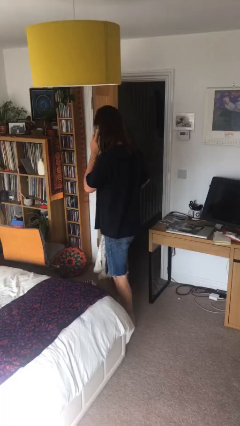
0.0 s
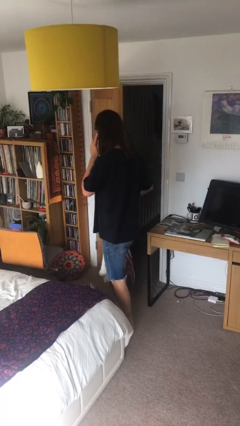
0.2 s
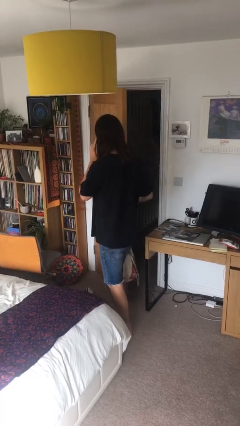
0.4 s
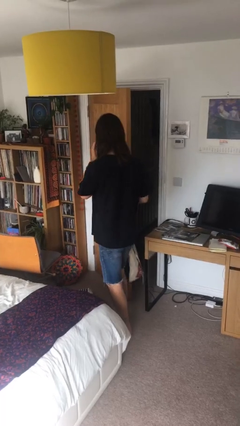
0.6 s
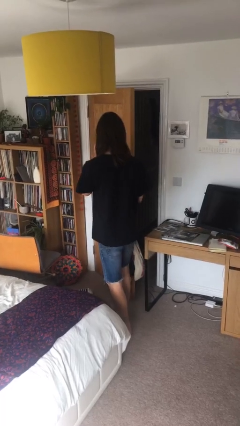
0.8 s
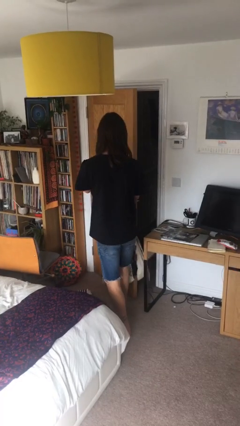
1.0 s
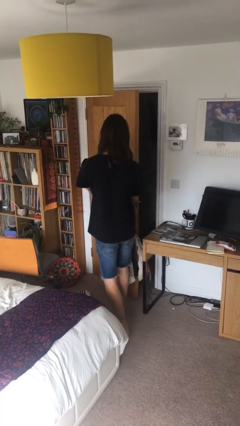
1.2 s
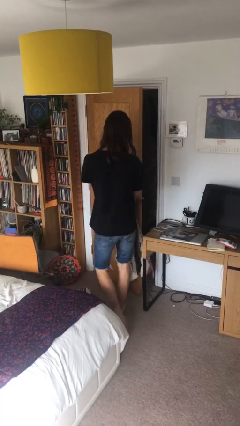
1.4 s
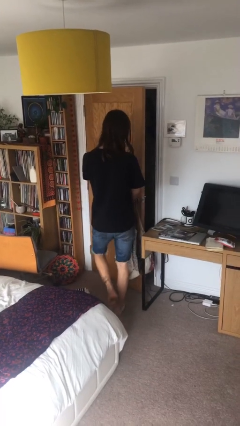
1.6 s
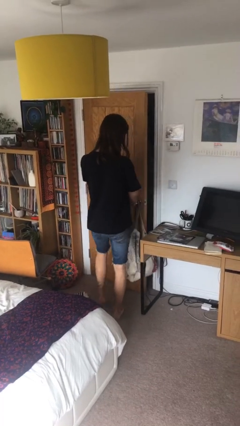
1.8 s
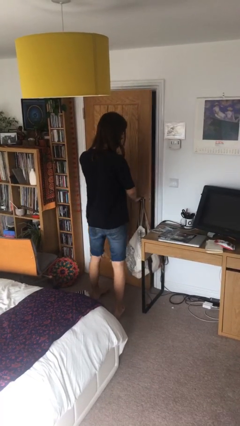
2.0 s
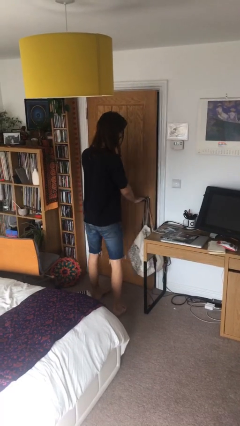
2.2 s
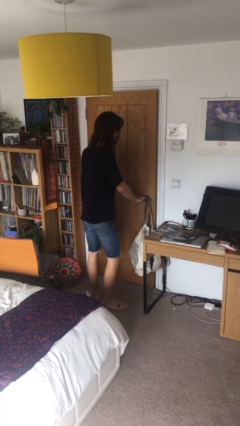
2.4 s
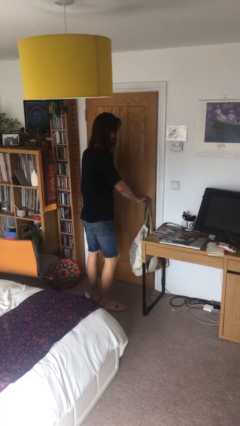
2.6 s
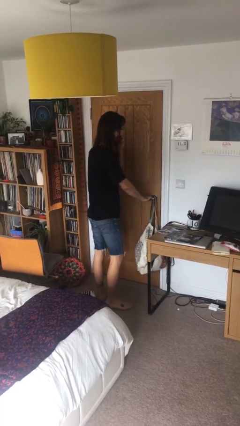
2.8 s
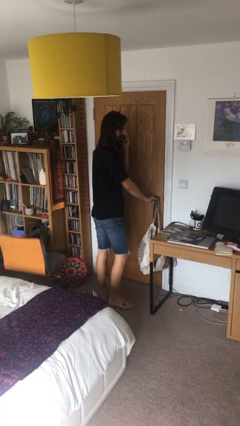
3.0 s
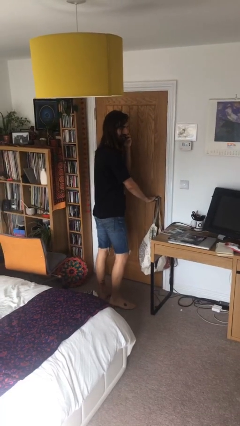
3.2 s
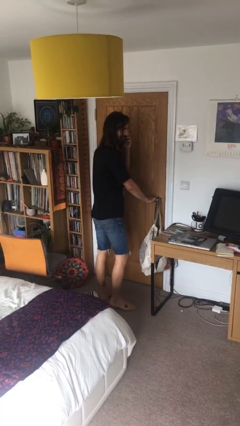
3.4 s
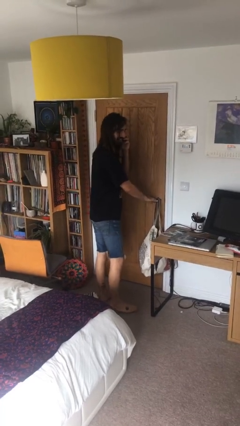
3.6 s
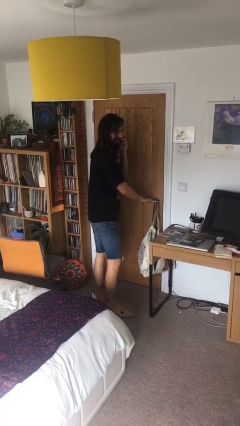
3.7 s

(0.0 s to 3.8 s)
person closes facility door

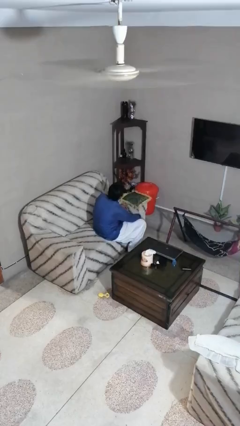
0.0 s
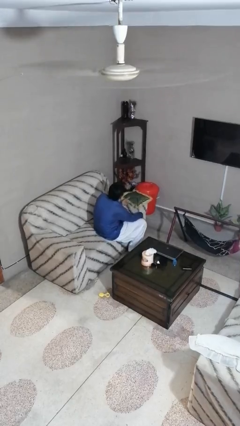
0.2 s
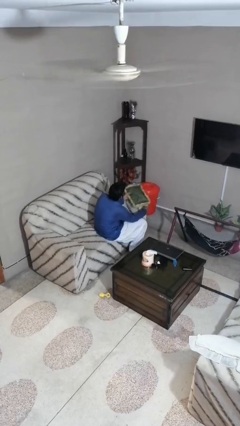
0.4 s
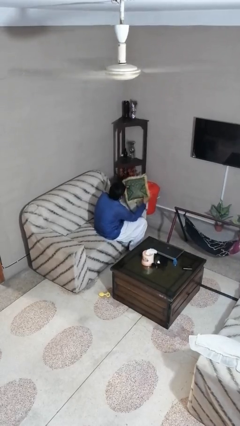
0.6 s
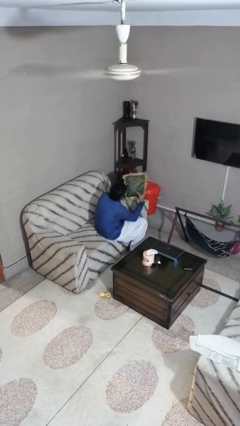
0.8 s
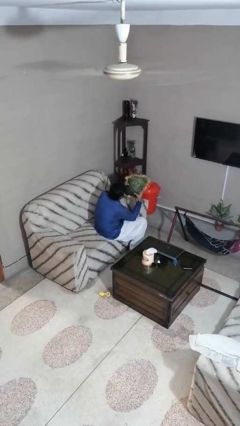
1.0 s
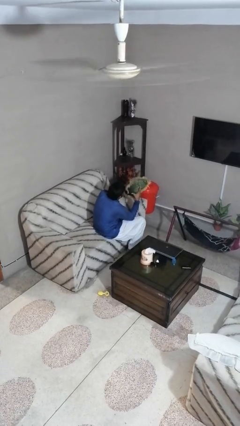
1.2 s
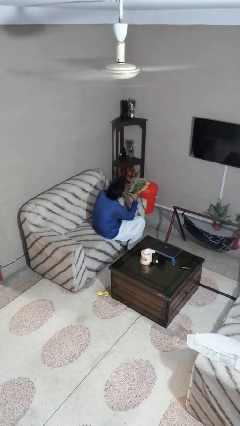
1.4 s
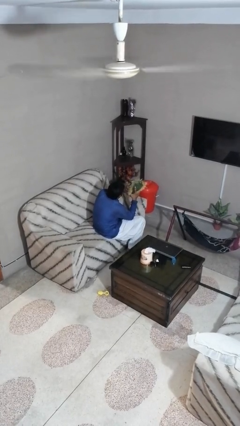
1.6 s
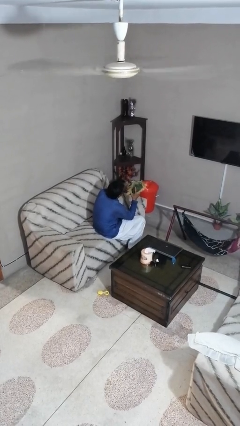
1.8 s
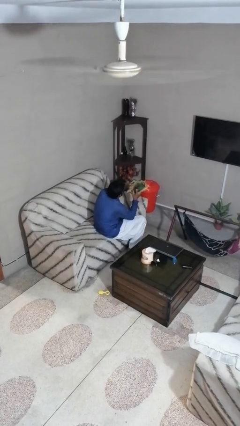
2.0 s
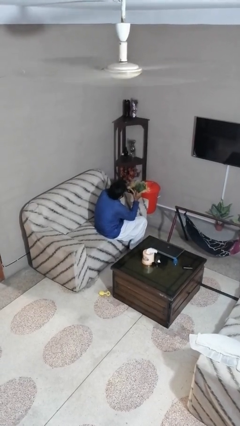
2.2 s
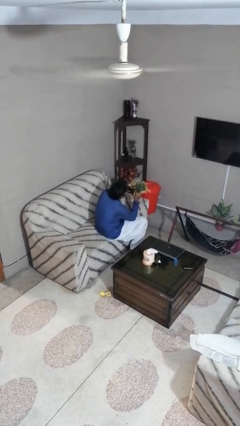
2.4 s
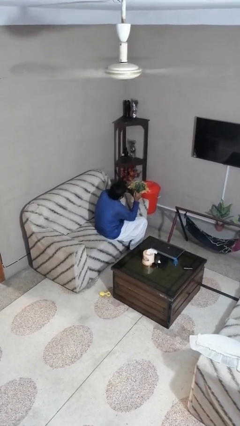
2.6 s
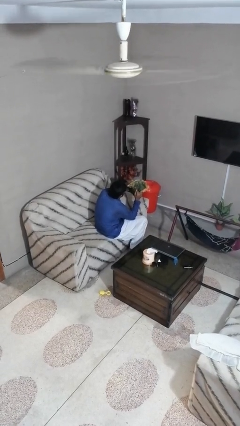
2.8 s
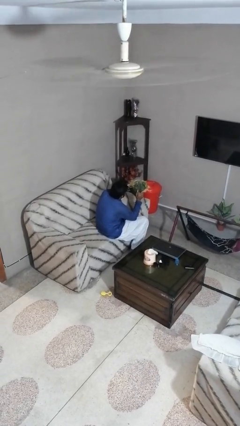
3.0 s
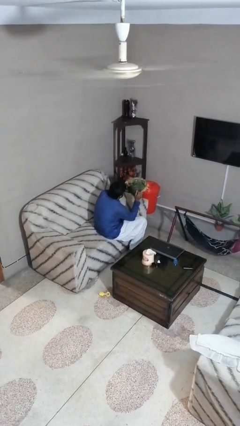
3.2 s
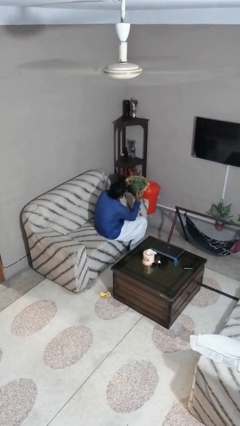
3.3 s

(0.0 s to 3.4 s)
person squeezes object

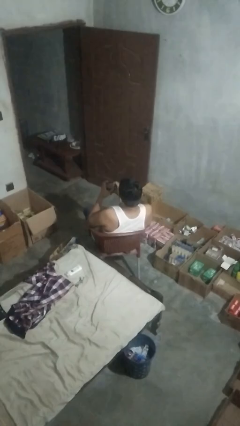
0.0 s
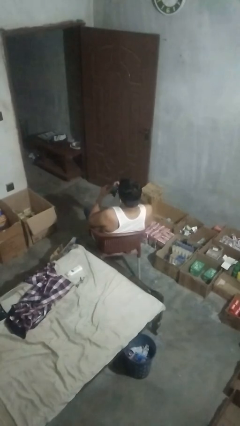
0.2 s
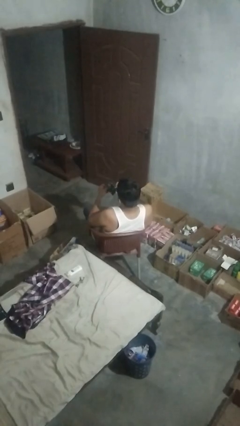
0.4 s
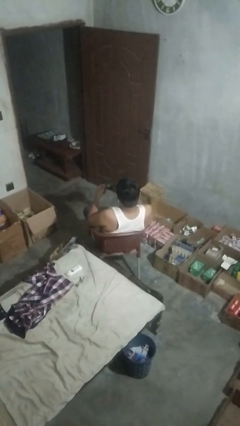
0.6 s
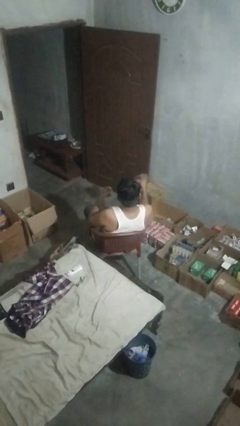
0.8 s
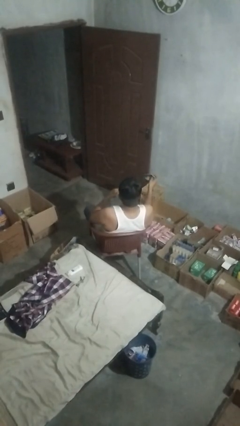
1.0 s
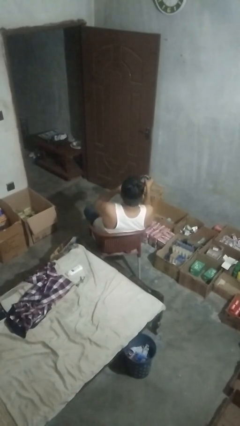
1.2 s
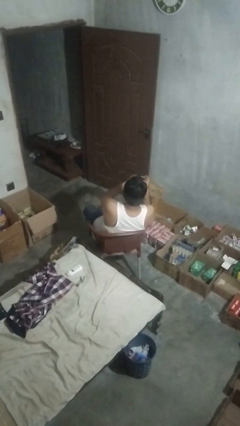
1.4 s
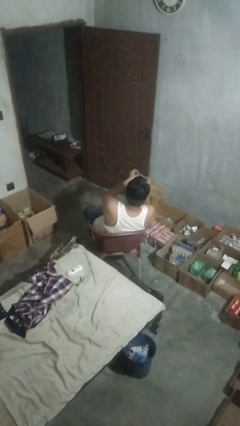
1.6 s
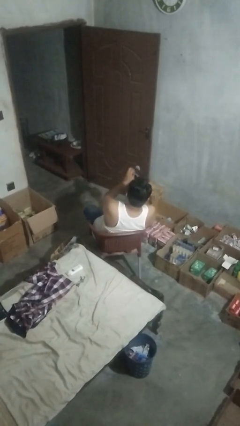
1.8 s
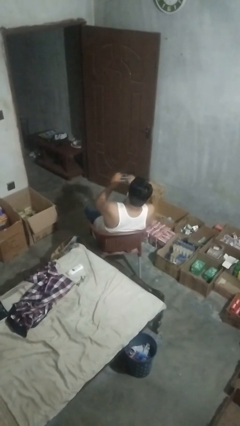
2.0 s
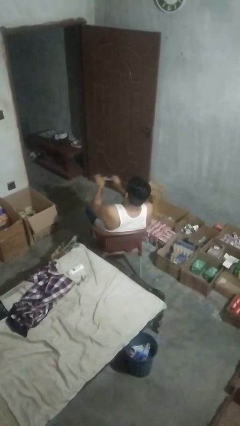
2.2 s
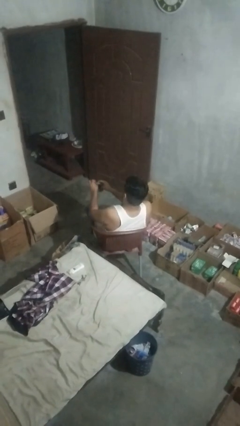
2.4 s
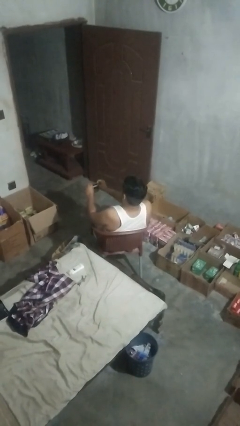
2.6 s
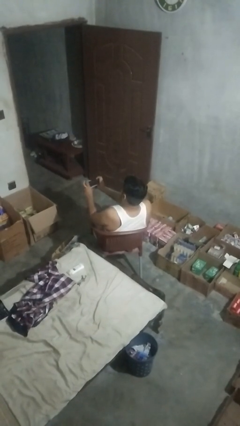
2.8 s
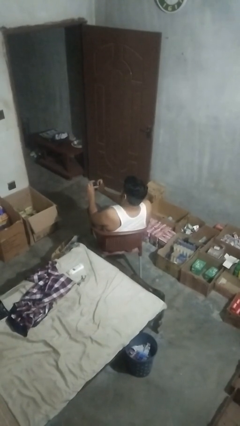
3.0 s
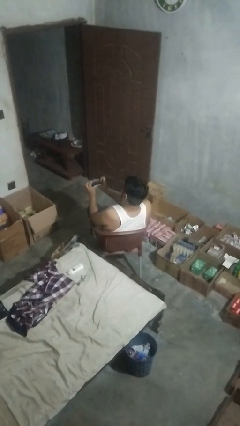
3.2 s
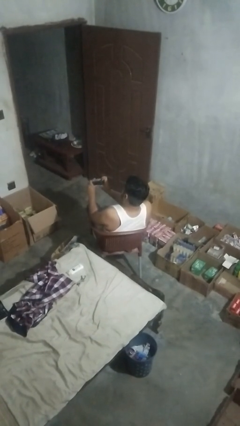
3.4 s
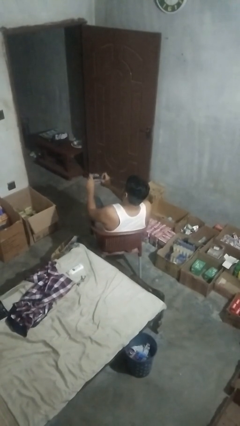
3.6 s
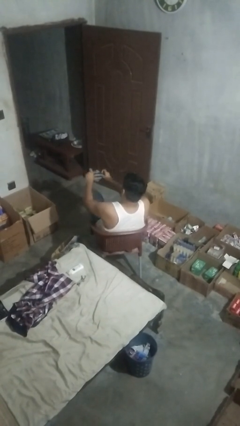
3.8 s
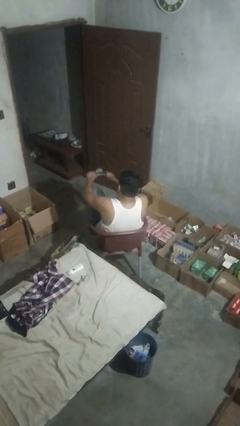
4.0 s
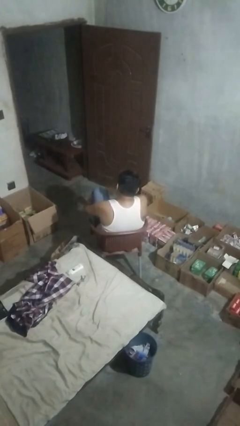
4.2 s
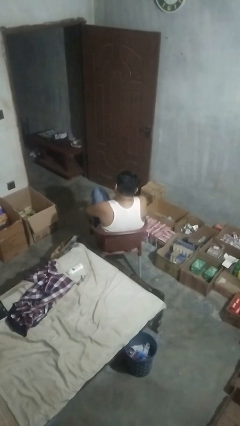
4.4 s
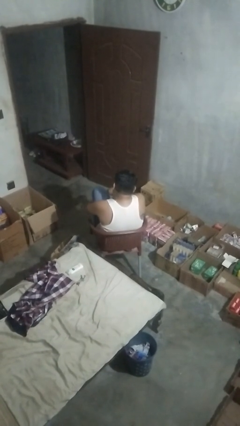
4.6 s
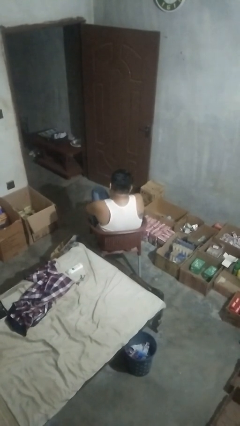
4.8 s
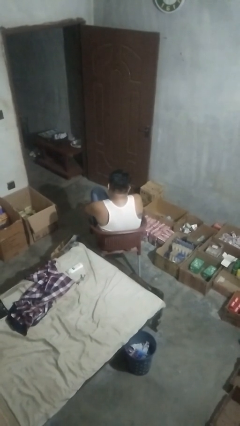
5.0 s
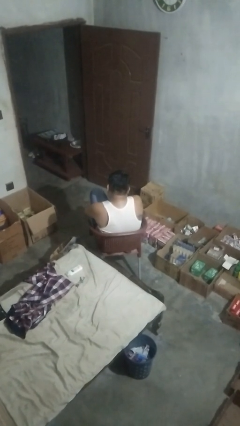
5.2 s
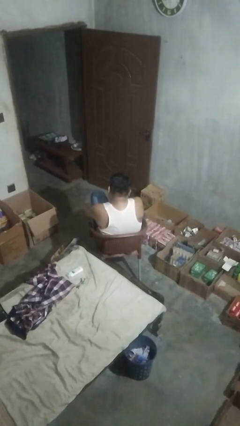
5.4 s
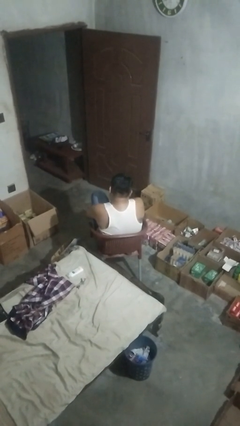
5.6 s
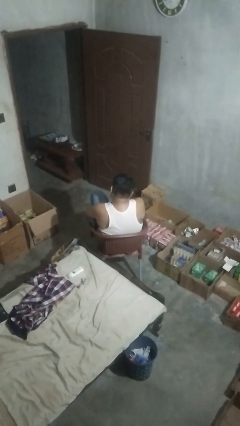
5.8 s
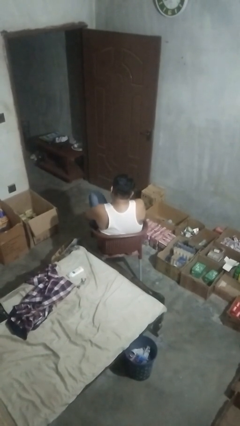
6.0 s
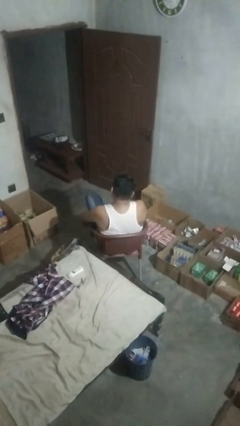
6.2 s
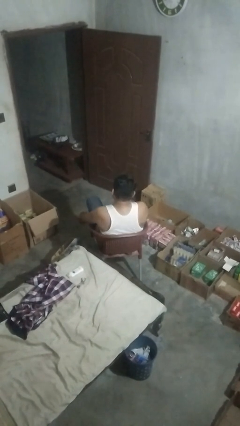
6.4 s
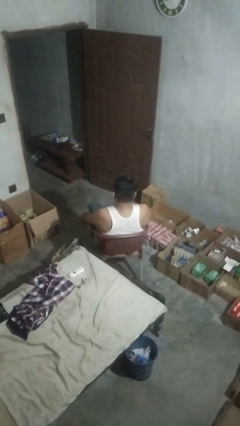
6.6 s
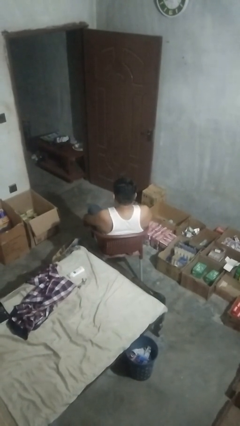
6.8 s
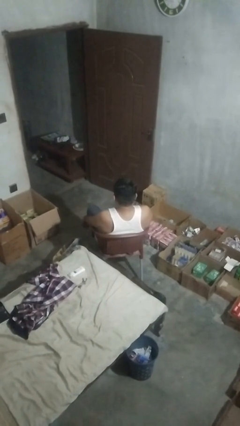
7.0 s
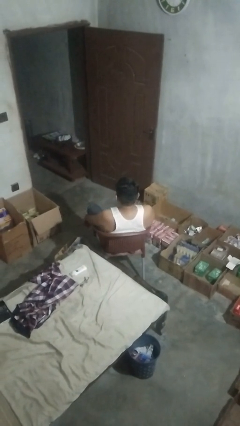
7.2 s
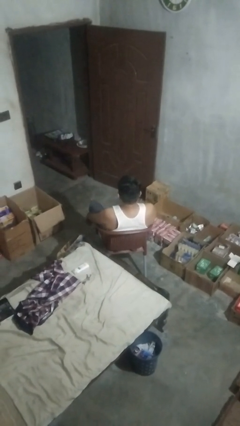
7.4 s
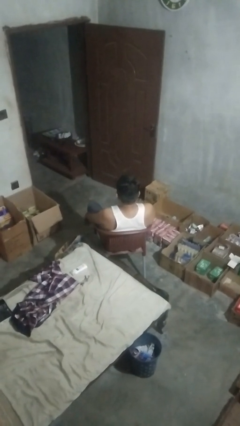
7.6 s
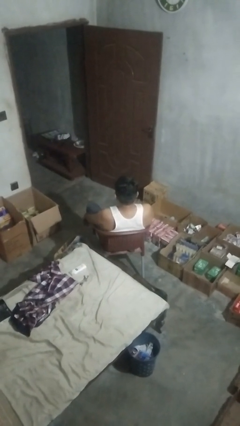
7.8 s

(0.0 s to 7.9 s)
person puts on socks

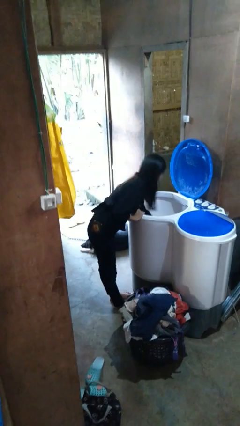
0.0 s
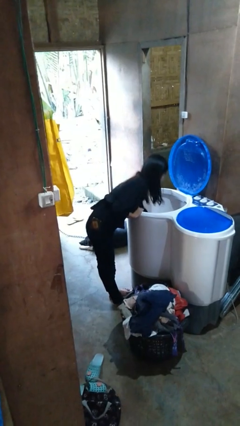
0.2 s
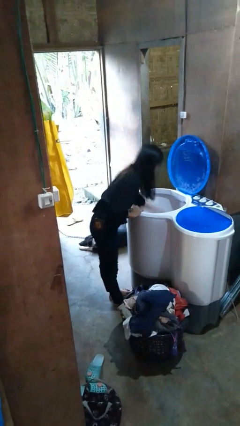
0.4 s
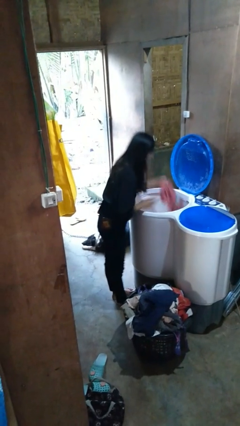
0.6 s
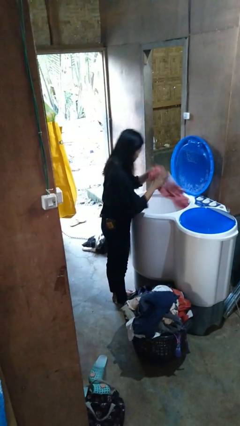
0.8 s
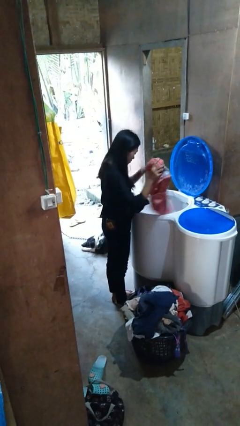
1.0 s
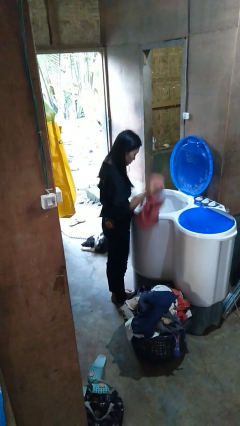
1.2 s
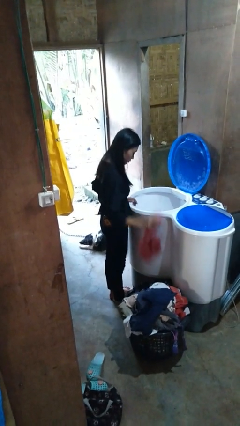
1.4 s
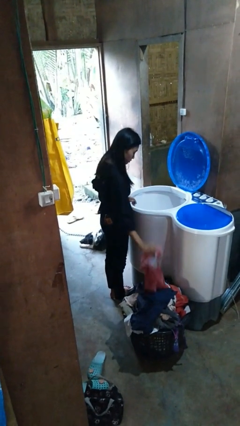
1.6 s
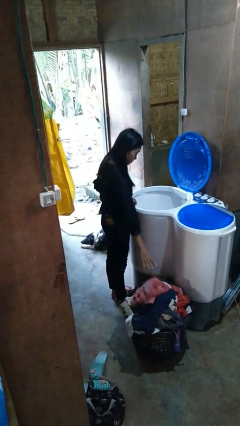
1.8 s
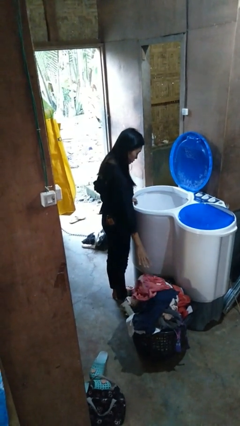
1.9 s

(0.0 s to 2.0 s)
person unloads clotheswasher

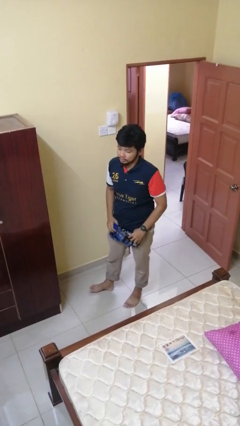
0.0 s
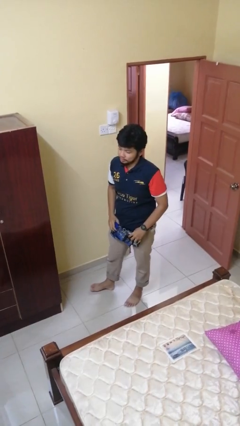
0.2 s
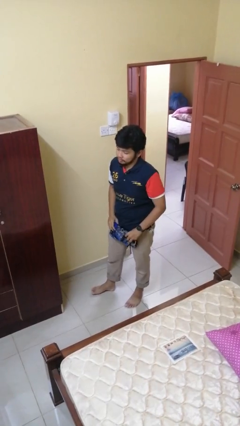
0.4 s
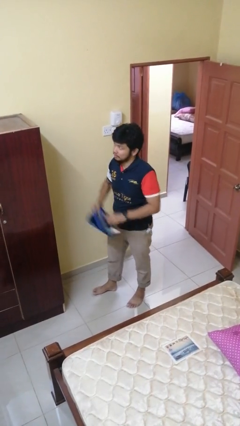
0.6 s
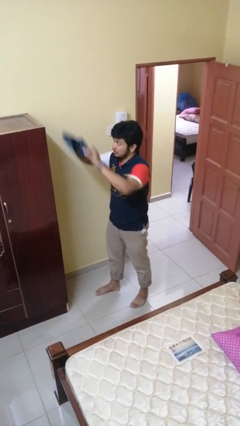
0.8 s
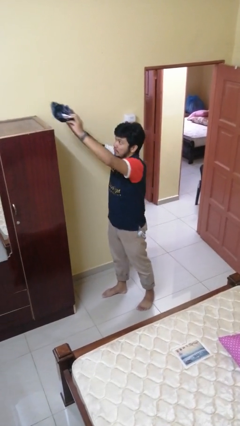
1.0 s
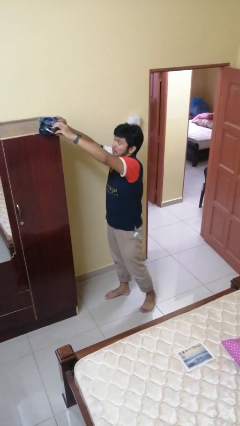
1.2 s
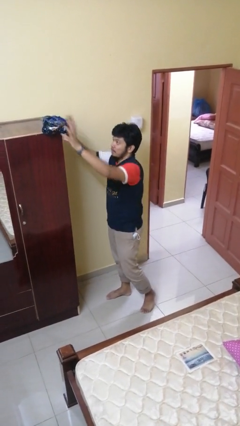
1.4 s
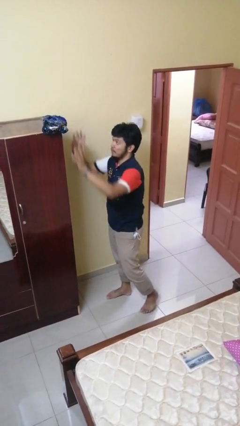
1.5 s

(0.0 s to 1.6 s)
person puts down object on countertop
